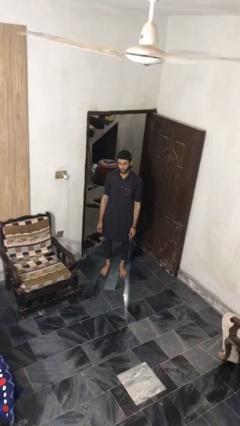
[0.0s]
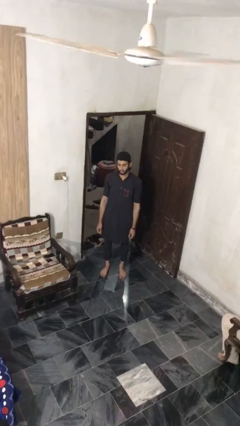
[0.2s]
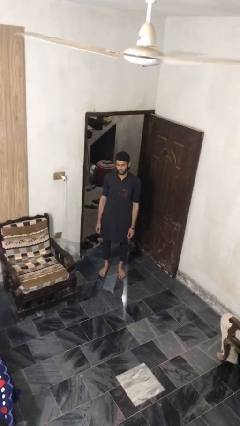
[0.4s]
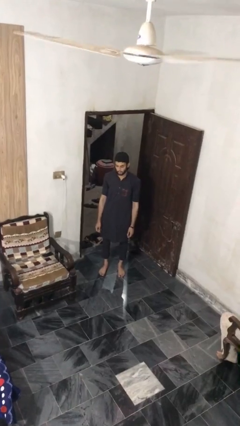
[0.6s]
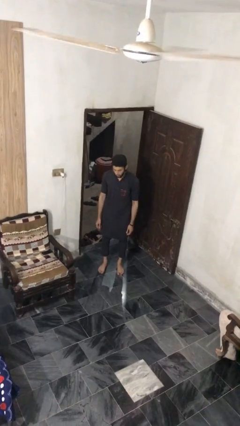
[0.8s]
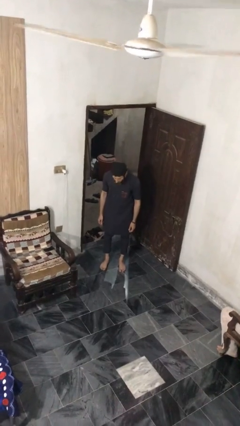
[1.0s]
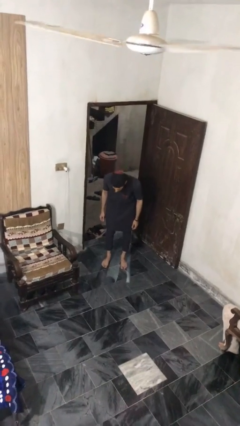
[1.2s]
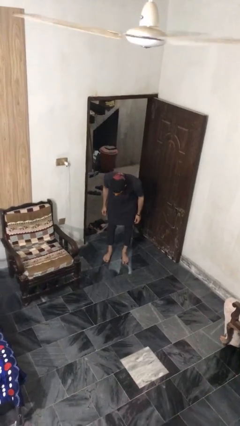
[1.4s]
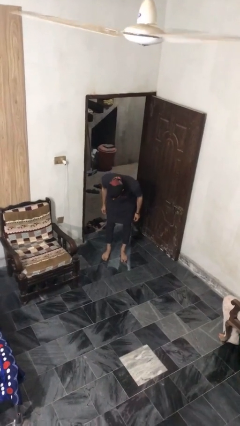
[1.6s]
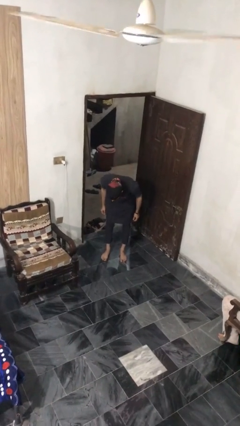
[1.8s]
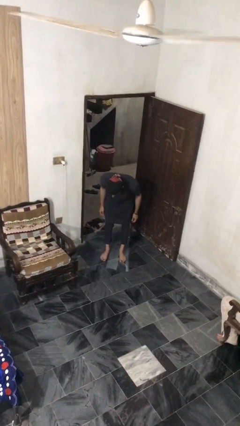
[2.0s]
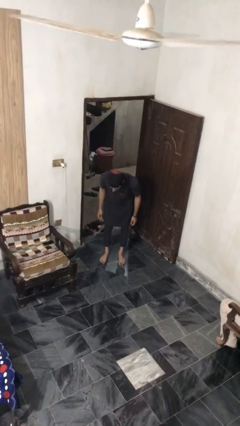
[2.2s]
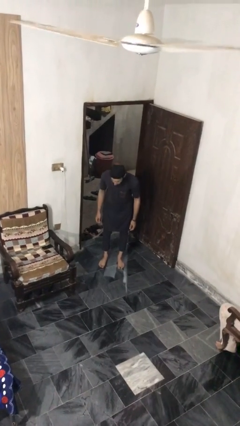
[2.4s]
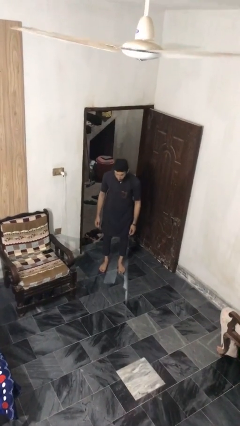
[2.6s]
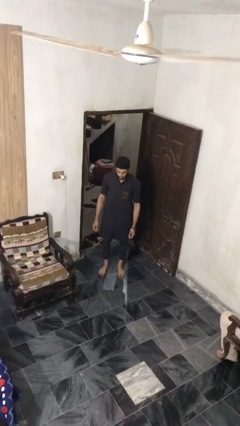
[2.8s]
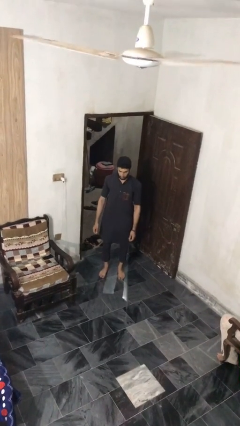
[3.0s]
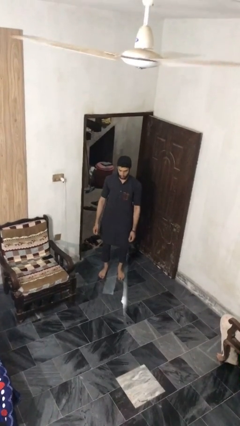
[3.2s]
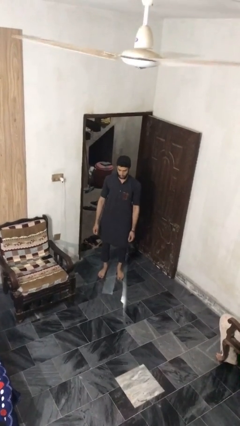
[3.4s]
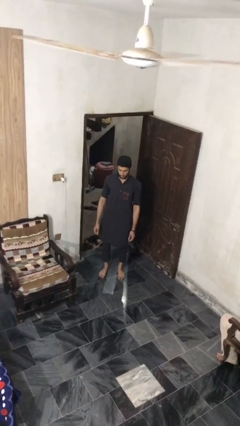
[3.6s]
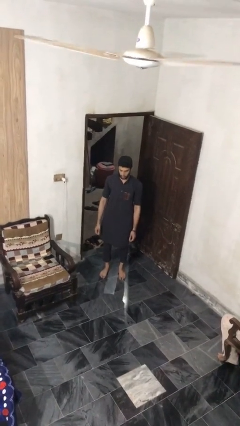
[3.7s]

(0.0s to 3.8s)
person bows

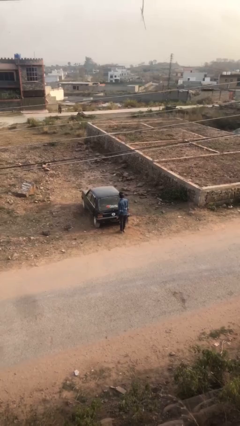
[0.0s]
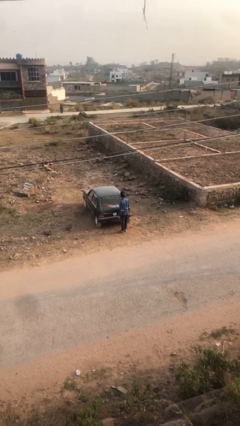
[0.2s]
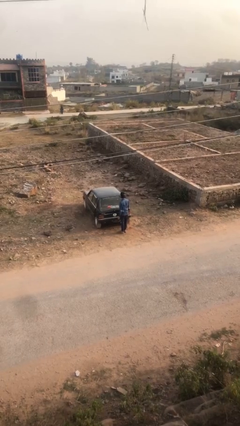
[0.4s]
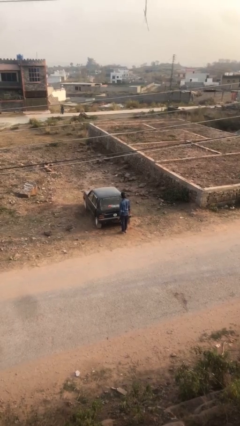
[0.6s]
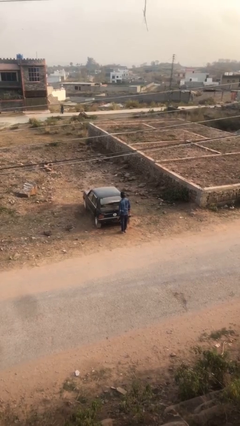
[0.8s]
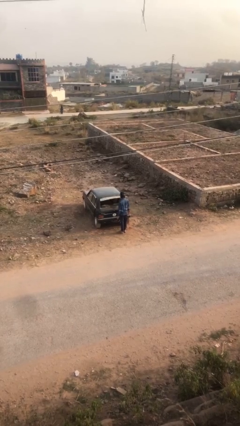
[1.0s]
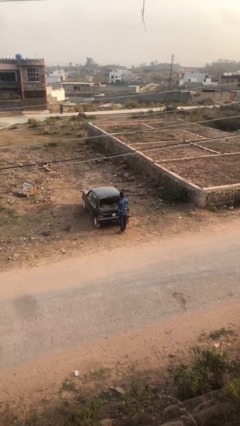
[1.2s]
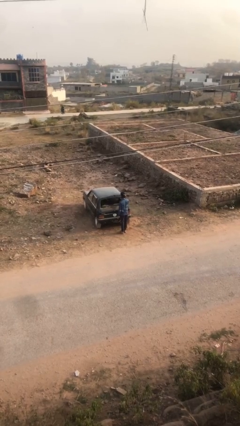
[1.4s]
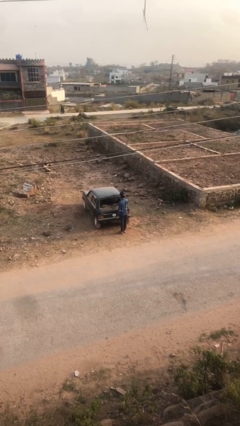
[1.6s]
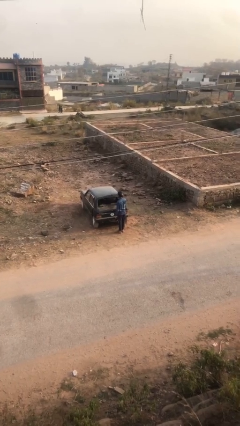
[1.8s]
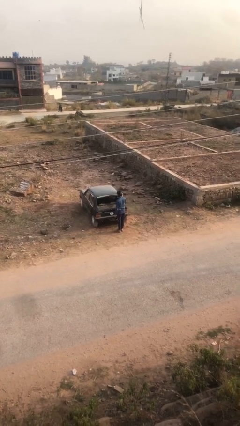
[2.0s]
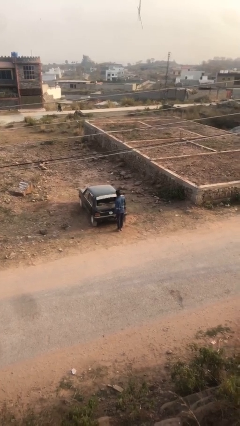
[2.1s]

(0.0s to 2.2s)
person opens car trunk

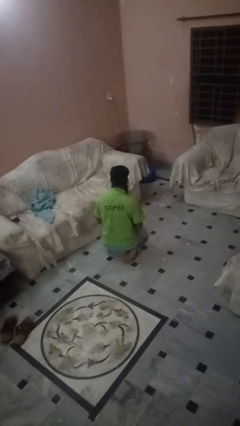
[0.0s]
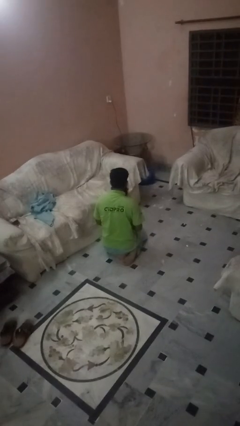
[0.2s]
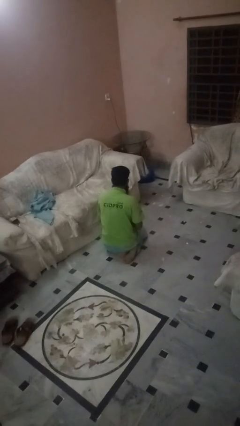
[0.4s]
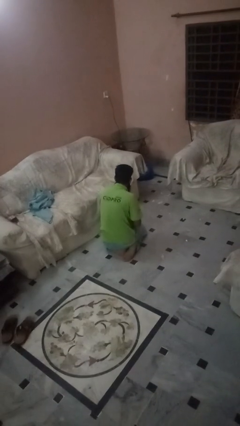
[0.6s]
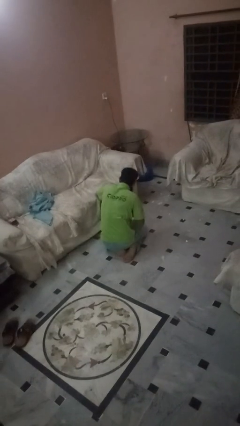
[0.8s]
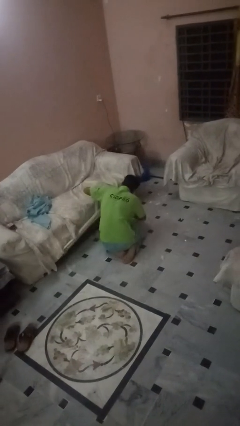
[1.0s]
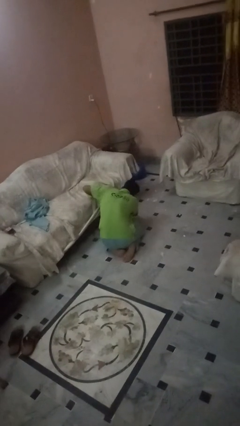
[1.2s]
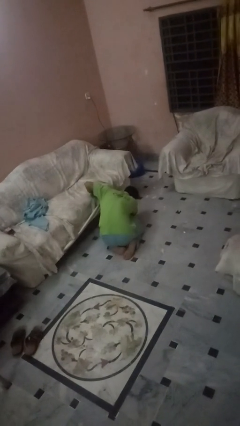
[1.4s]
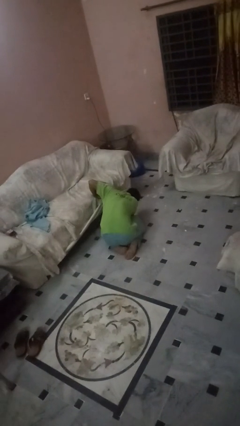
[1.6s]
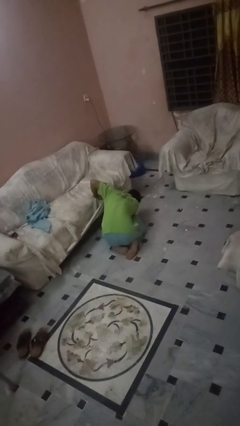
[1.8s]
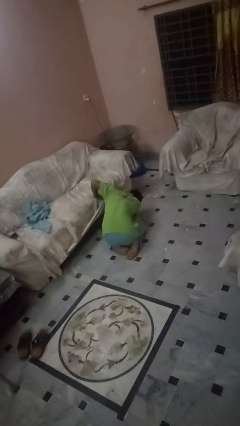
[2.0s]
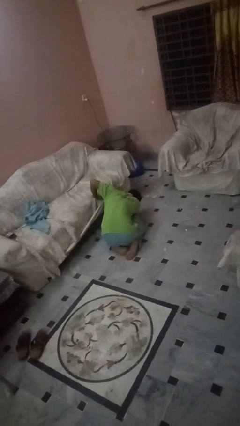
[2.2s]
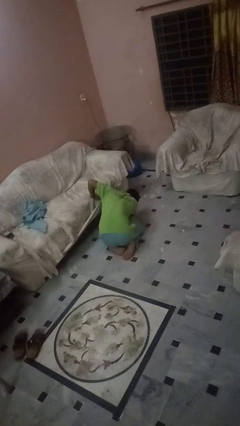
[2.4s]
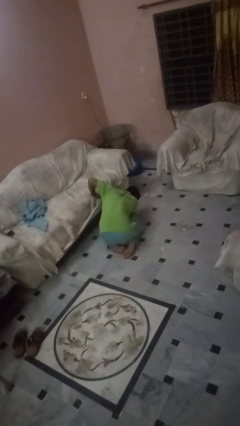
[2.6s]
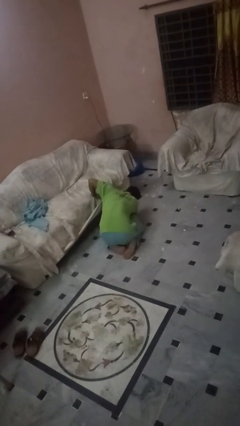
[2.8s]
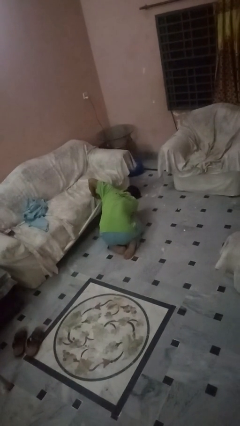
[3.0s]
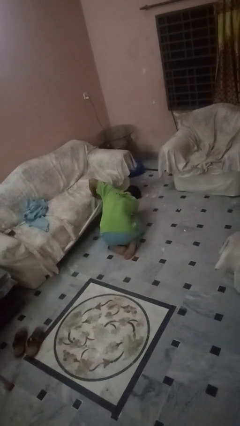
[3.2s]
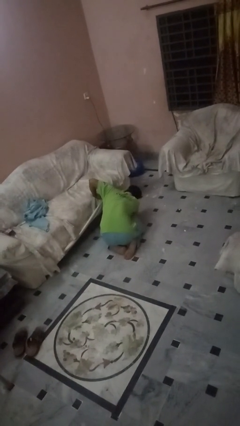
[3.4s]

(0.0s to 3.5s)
person searches under couch

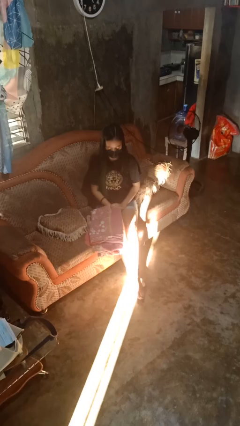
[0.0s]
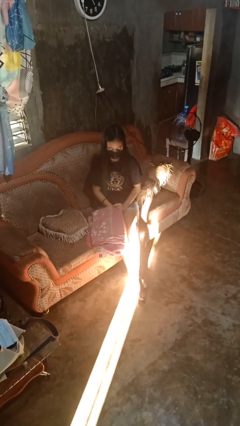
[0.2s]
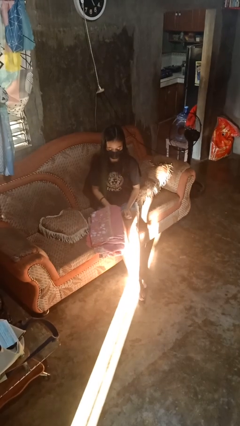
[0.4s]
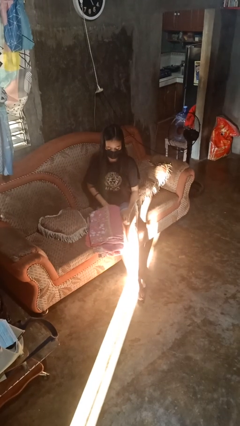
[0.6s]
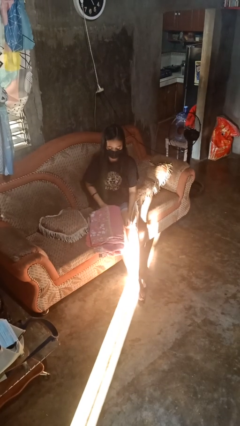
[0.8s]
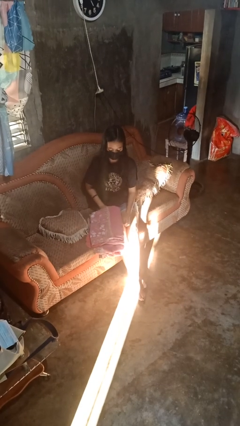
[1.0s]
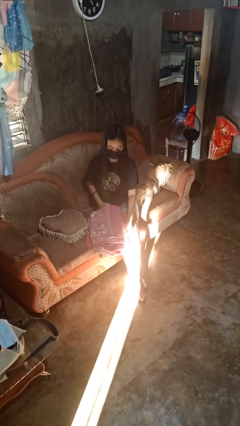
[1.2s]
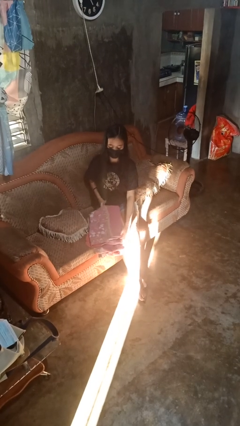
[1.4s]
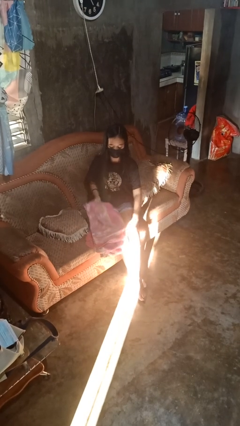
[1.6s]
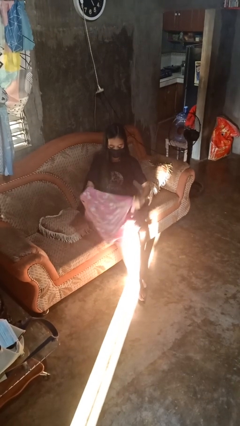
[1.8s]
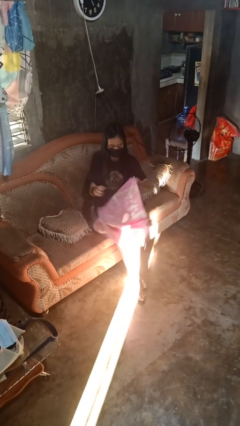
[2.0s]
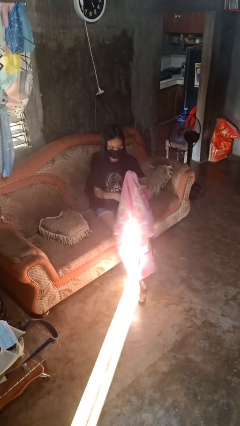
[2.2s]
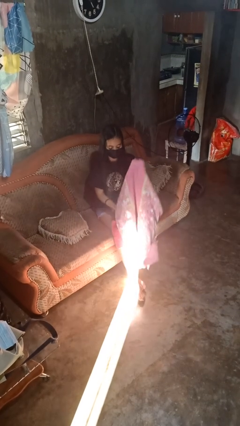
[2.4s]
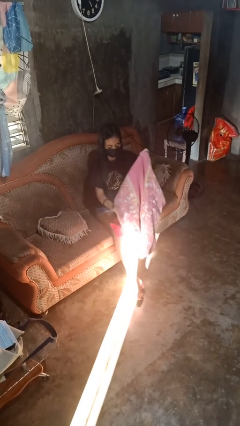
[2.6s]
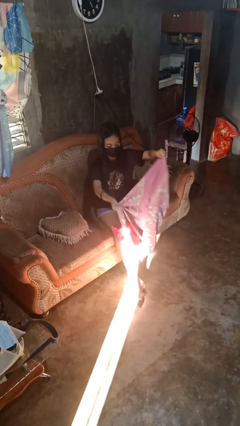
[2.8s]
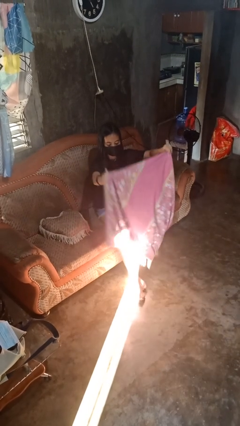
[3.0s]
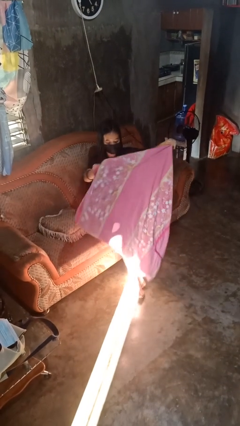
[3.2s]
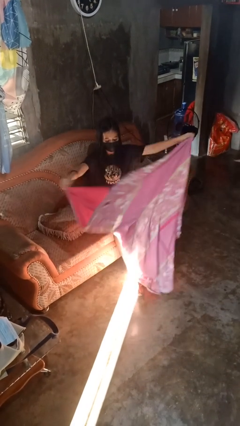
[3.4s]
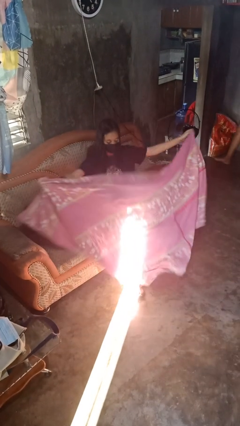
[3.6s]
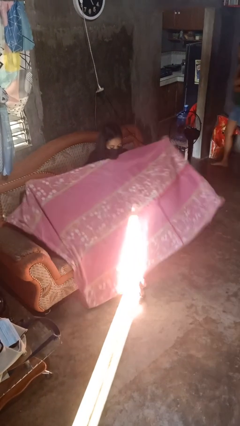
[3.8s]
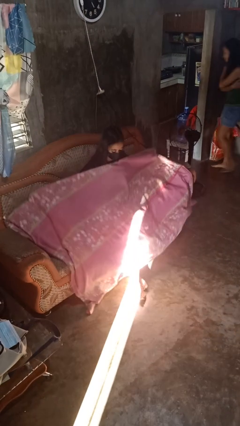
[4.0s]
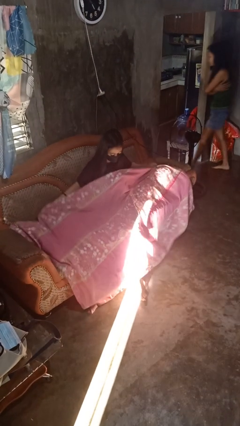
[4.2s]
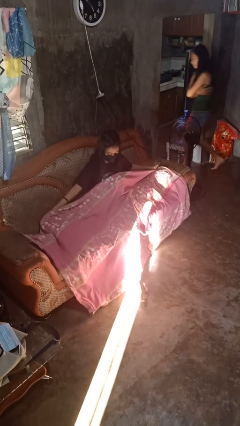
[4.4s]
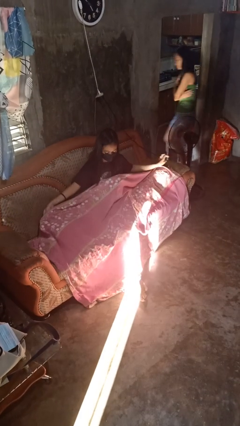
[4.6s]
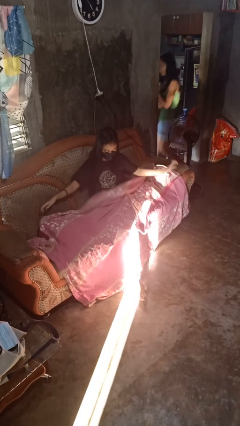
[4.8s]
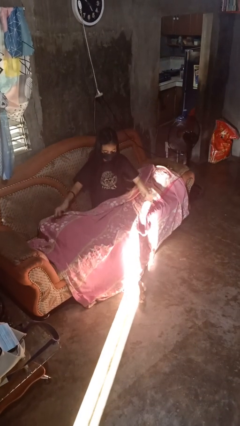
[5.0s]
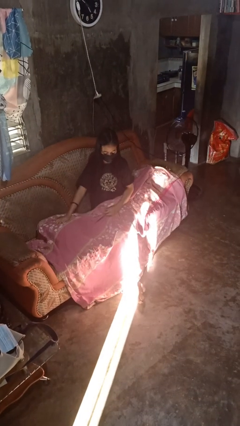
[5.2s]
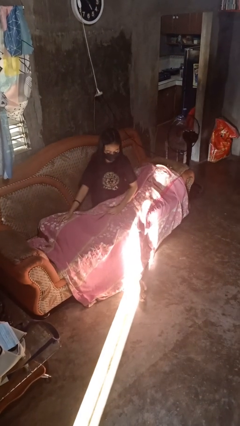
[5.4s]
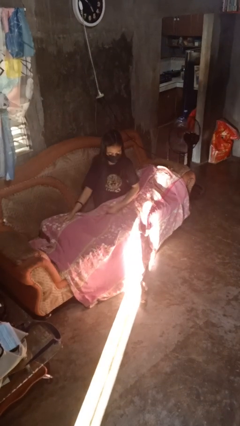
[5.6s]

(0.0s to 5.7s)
person unfolds blanket

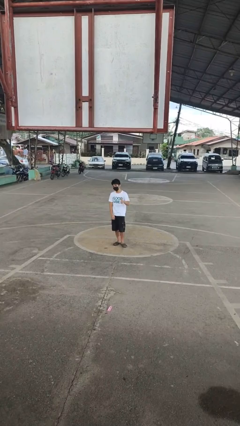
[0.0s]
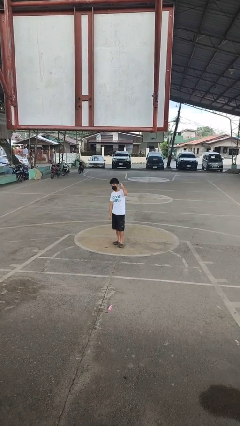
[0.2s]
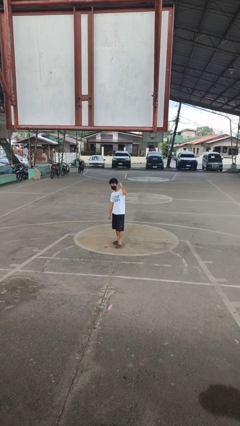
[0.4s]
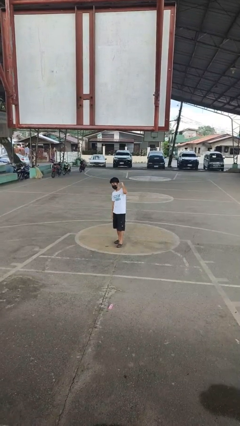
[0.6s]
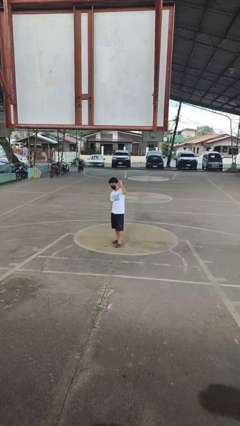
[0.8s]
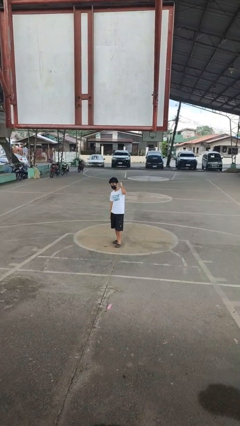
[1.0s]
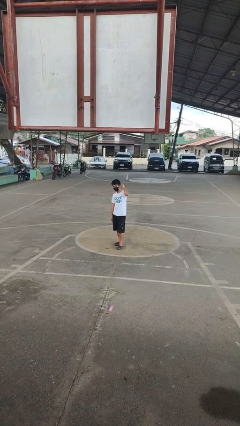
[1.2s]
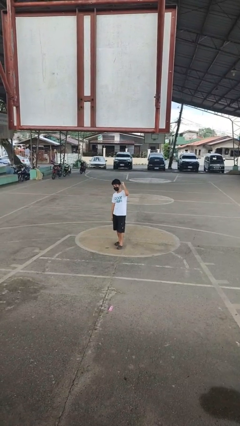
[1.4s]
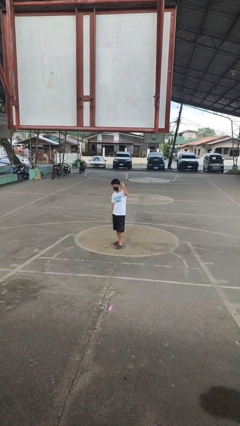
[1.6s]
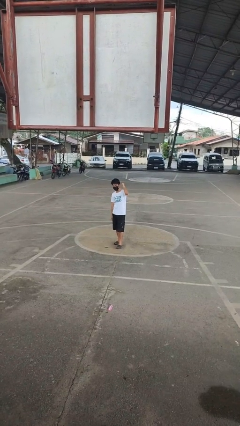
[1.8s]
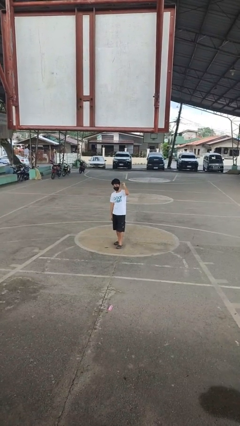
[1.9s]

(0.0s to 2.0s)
person gestures behind me

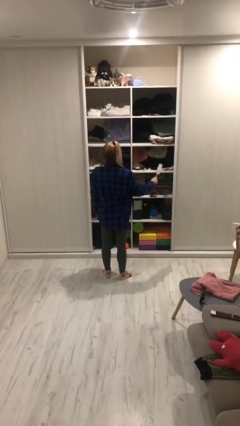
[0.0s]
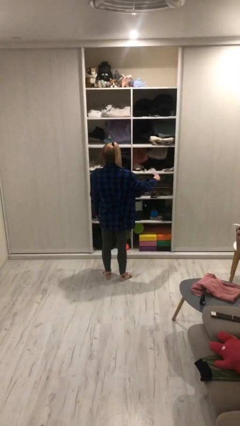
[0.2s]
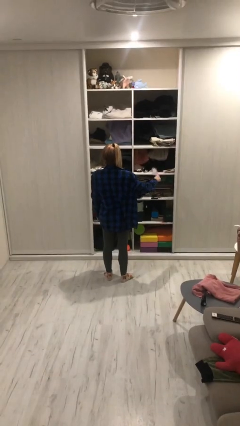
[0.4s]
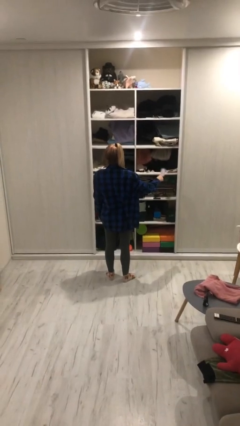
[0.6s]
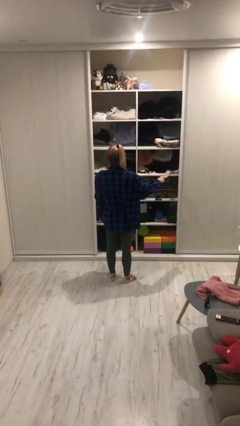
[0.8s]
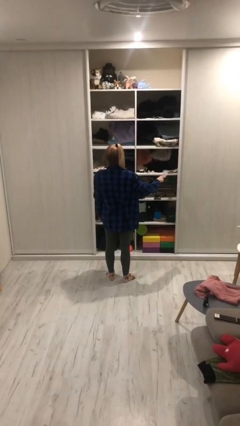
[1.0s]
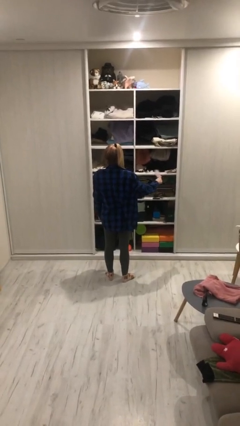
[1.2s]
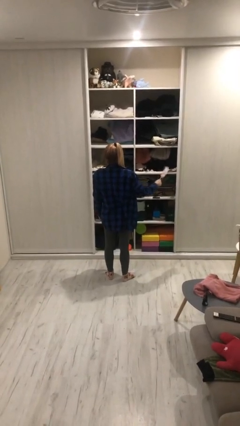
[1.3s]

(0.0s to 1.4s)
person dusts furniture
